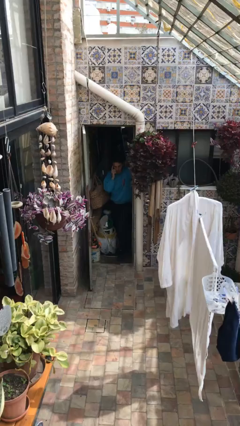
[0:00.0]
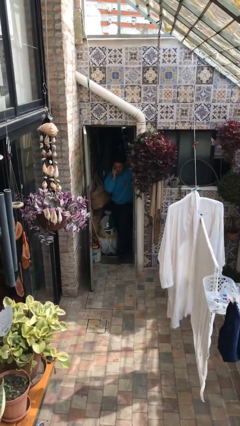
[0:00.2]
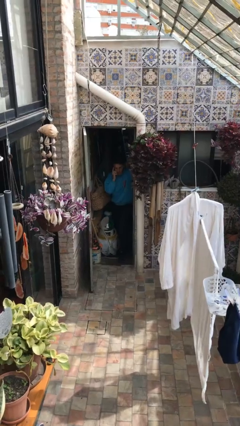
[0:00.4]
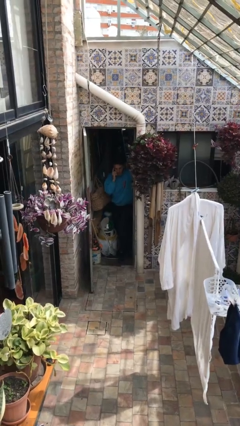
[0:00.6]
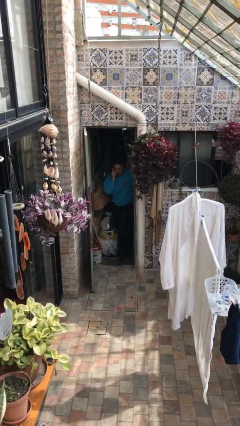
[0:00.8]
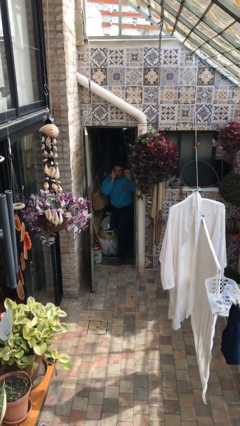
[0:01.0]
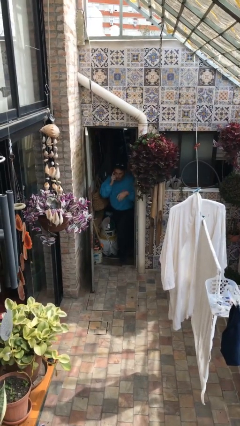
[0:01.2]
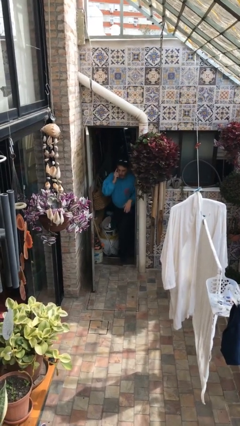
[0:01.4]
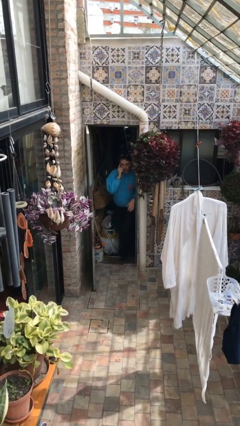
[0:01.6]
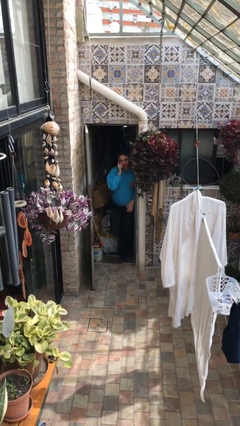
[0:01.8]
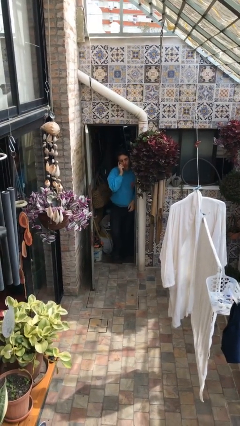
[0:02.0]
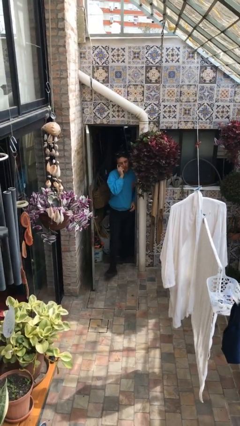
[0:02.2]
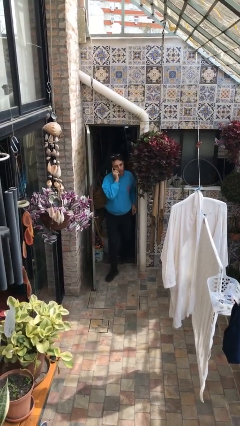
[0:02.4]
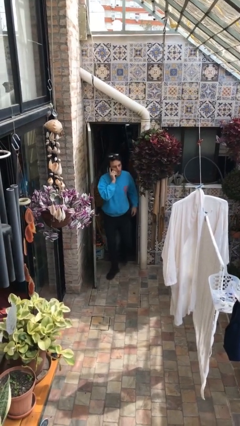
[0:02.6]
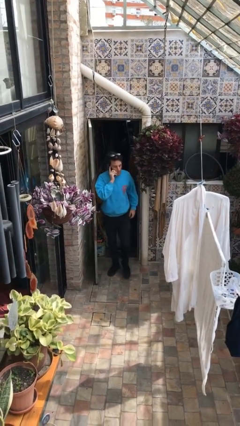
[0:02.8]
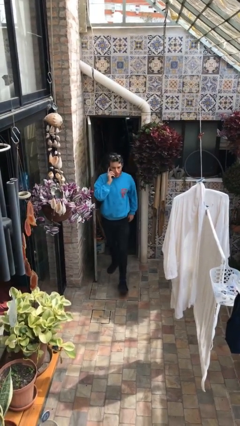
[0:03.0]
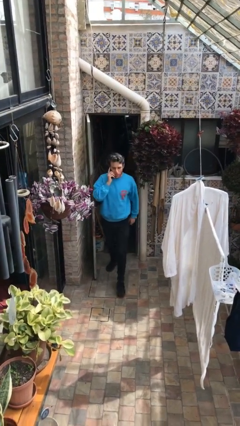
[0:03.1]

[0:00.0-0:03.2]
person enters scene through structure

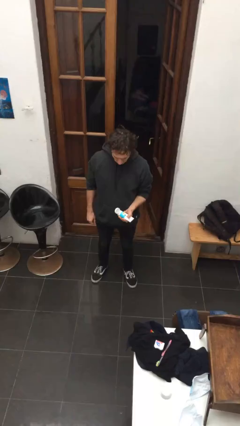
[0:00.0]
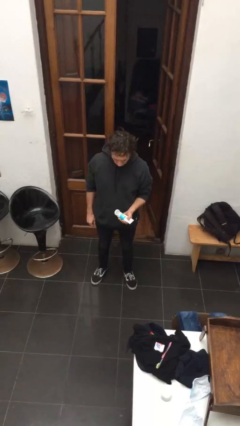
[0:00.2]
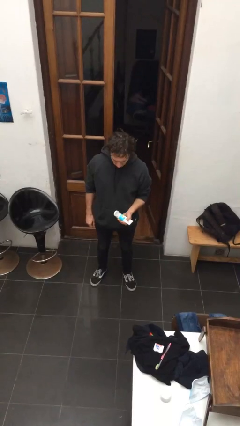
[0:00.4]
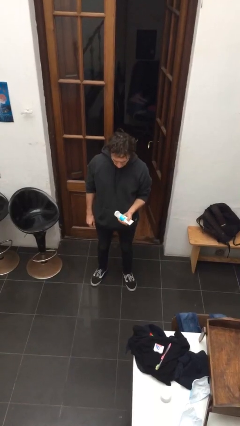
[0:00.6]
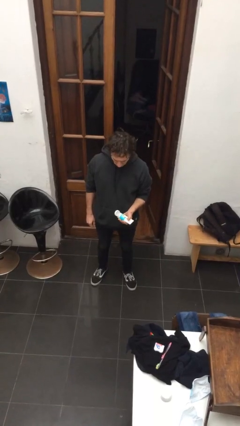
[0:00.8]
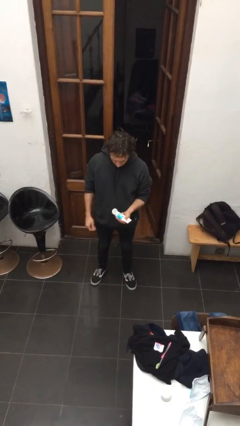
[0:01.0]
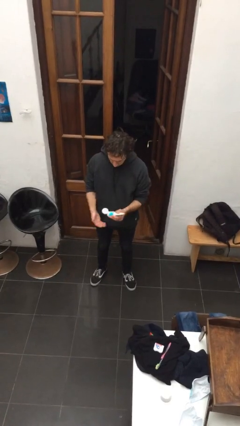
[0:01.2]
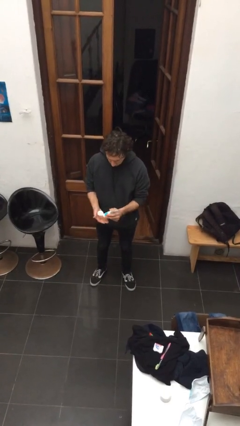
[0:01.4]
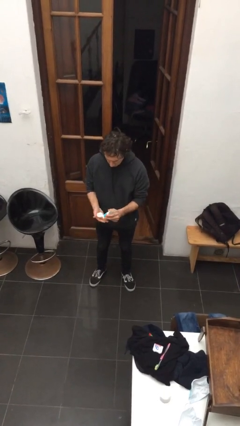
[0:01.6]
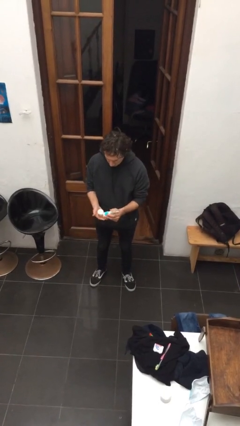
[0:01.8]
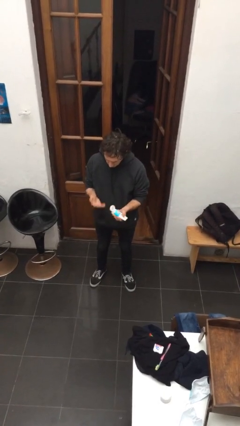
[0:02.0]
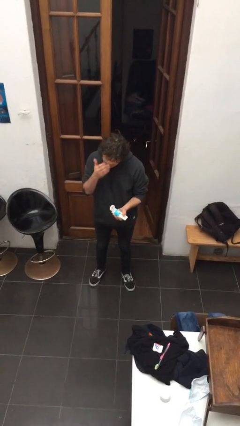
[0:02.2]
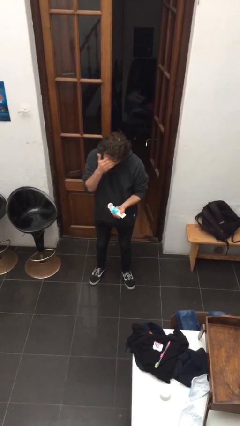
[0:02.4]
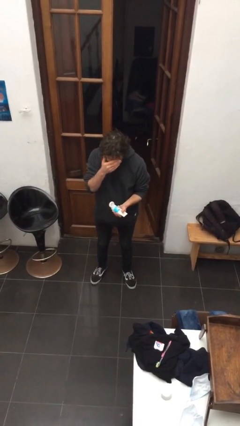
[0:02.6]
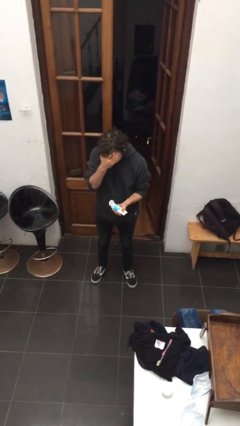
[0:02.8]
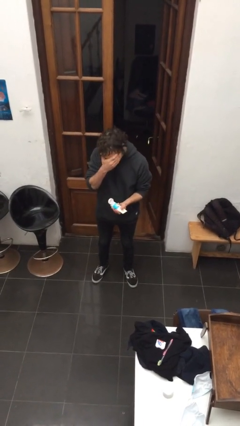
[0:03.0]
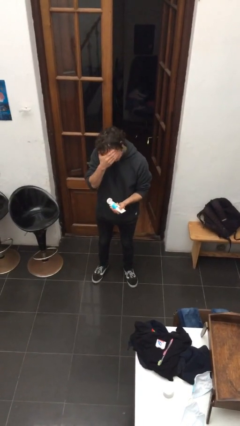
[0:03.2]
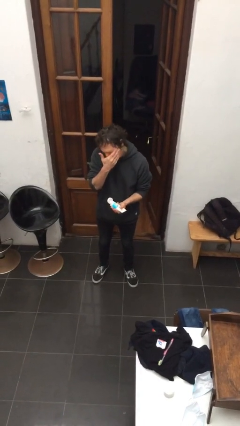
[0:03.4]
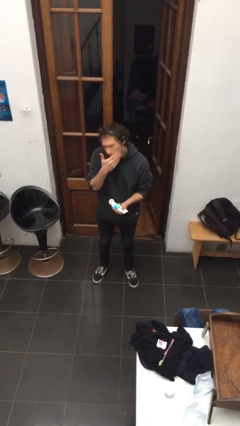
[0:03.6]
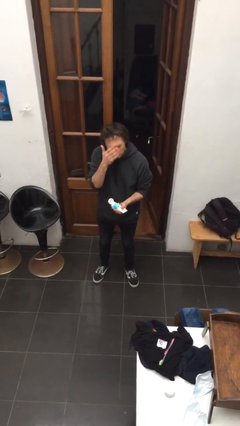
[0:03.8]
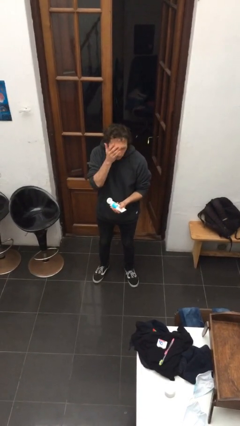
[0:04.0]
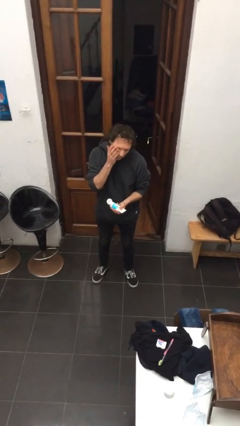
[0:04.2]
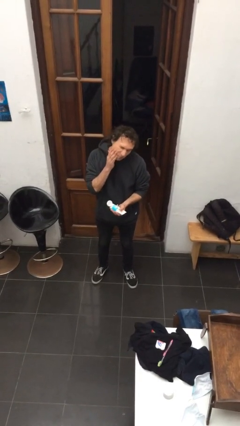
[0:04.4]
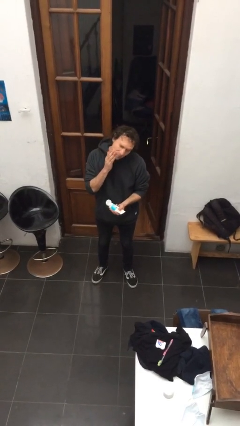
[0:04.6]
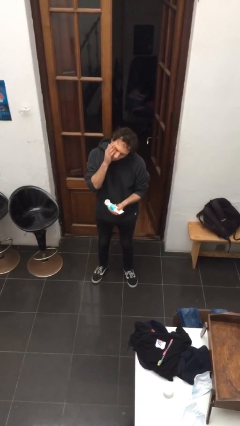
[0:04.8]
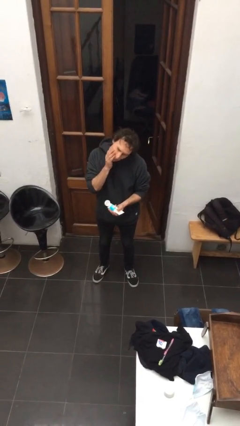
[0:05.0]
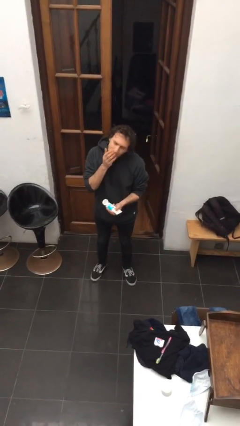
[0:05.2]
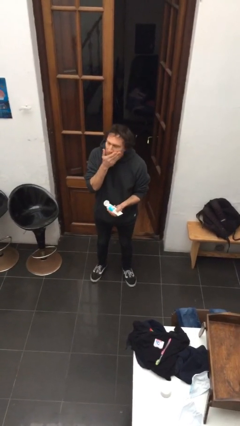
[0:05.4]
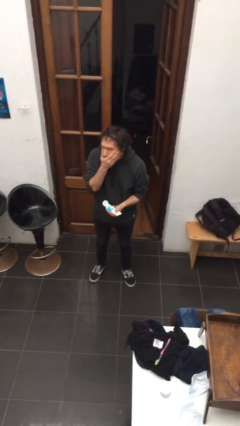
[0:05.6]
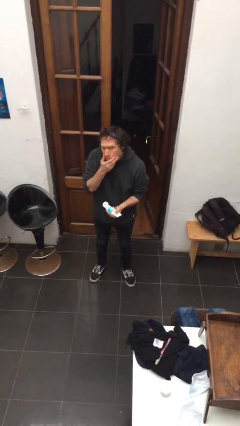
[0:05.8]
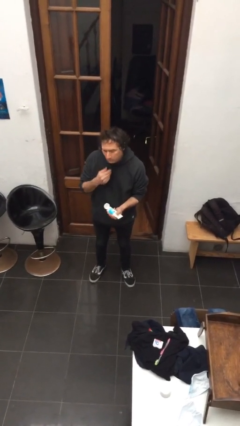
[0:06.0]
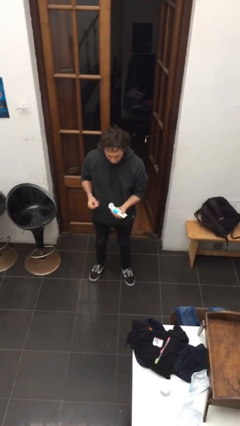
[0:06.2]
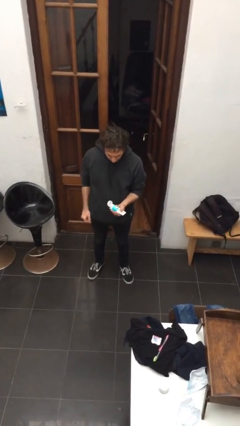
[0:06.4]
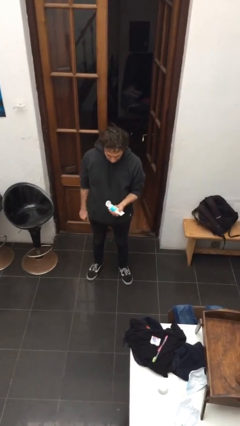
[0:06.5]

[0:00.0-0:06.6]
person applies facial moisturizer

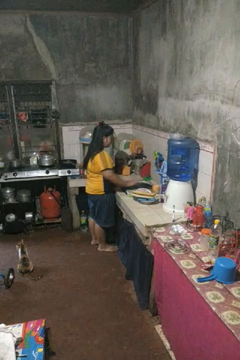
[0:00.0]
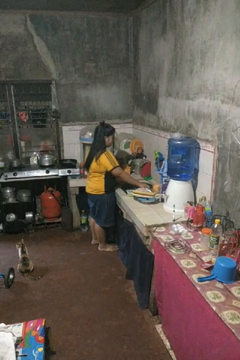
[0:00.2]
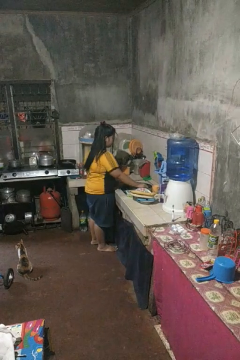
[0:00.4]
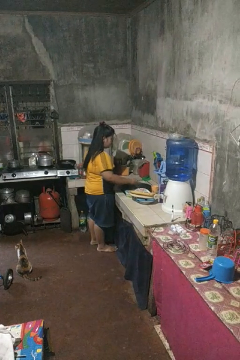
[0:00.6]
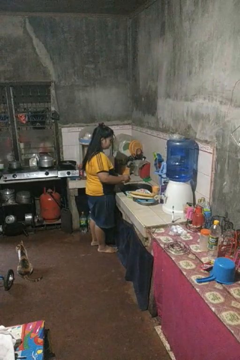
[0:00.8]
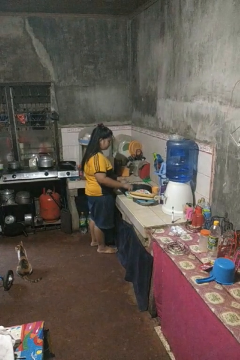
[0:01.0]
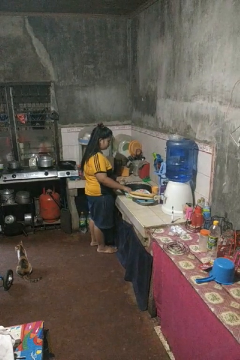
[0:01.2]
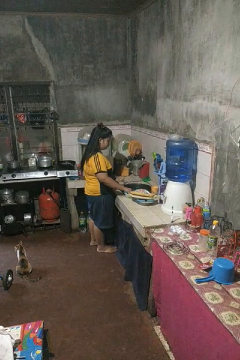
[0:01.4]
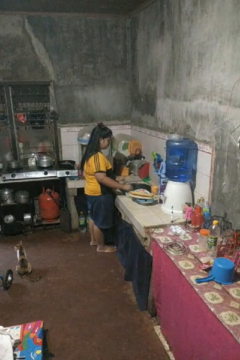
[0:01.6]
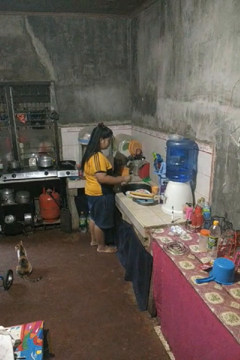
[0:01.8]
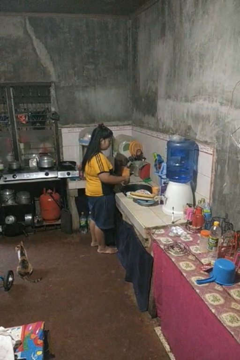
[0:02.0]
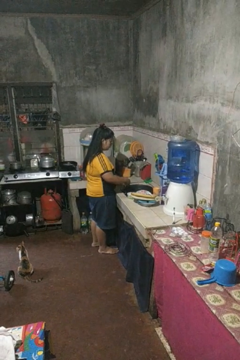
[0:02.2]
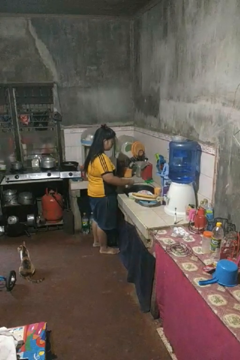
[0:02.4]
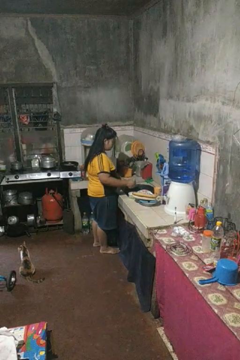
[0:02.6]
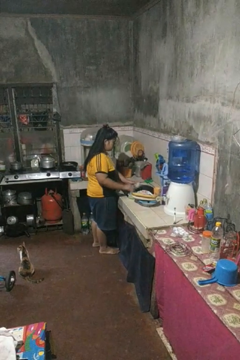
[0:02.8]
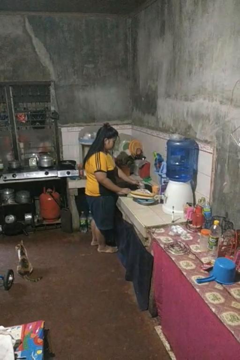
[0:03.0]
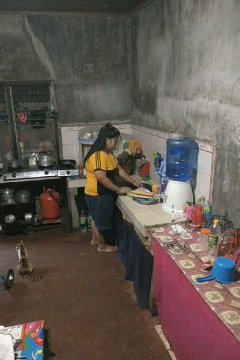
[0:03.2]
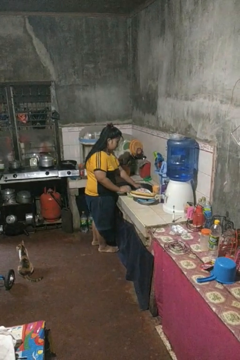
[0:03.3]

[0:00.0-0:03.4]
person washes dish

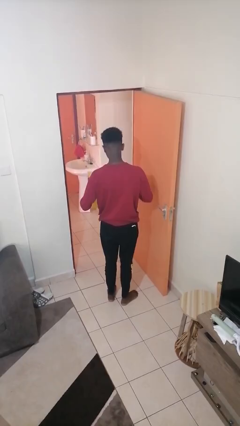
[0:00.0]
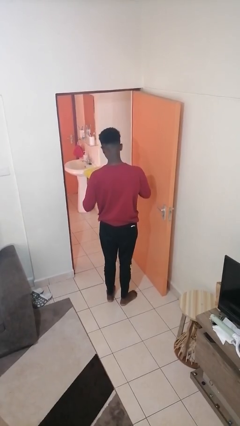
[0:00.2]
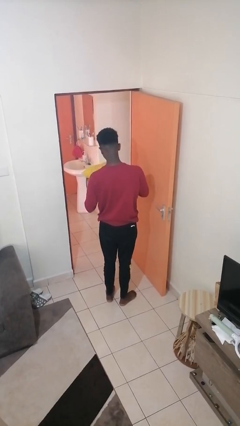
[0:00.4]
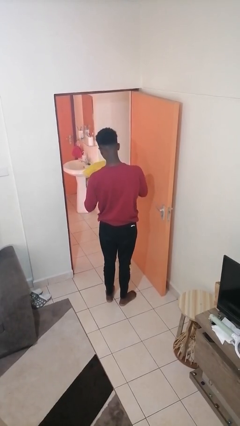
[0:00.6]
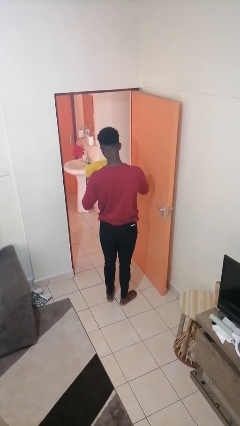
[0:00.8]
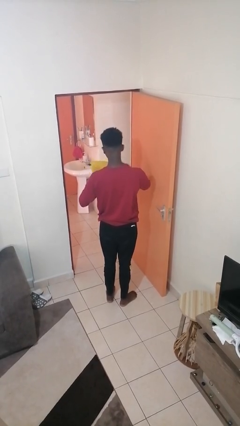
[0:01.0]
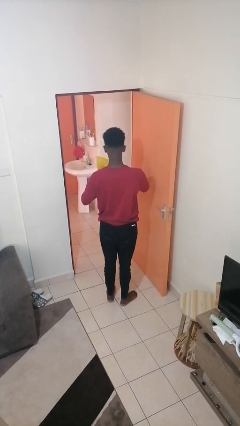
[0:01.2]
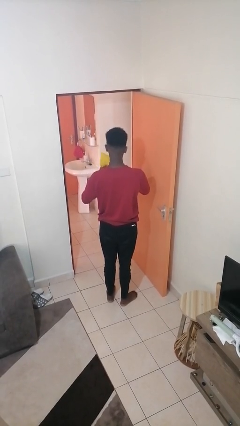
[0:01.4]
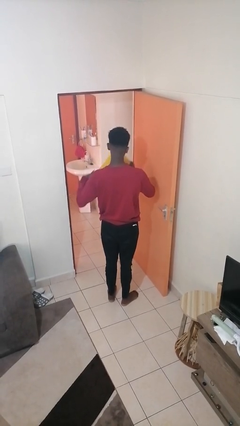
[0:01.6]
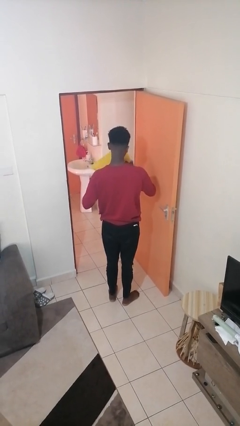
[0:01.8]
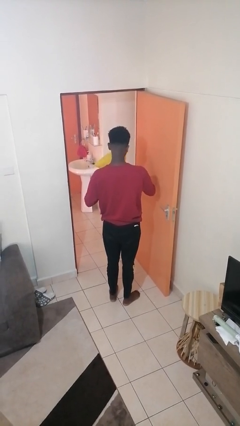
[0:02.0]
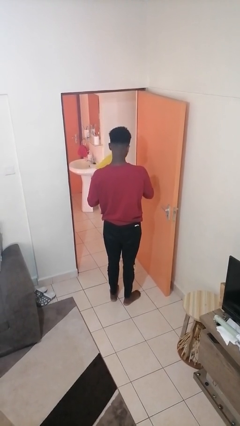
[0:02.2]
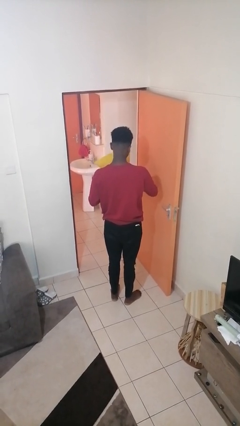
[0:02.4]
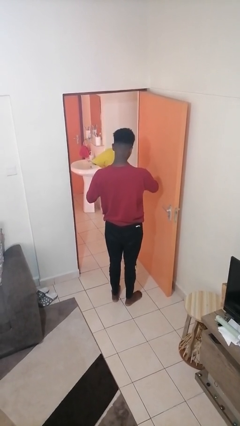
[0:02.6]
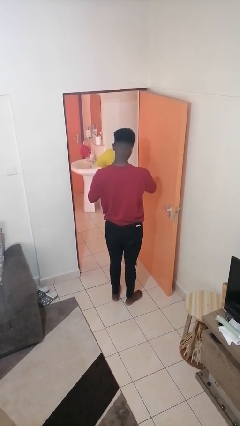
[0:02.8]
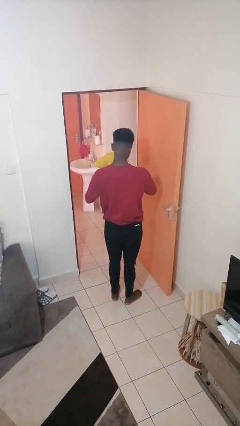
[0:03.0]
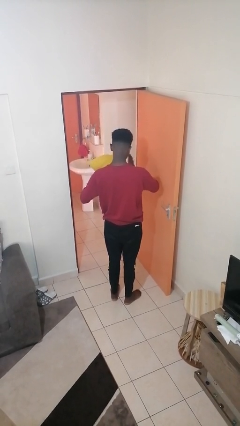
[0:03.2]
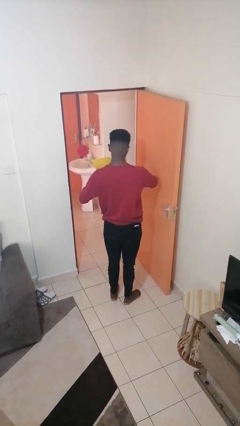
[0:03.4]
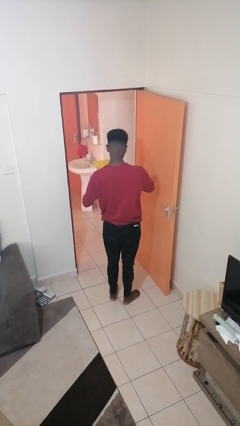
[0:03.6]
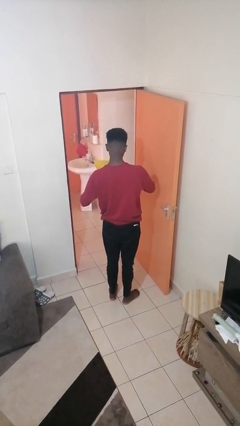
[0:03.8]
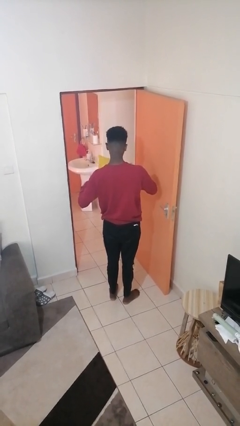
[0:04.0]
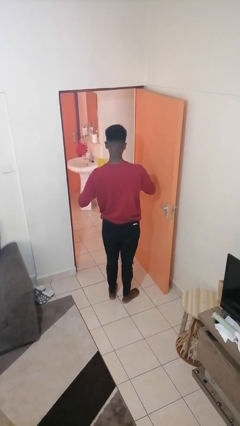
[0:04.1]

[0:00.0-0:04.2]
person squeezes object

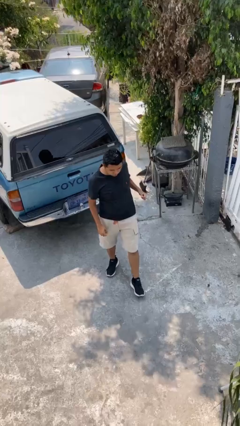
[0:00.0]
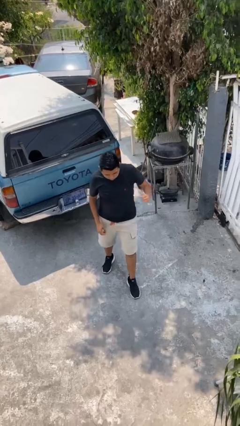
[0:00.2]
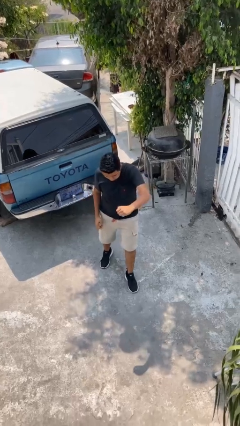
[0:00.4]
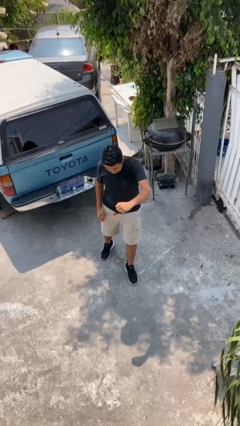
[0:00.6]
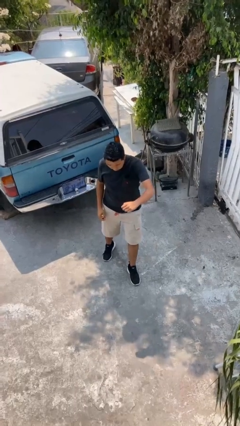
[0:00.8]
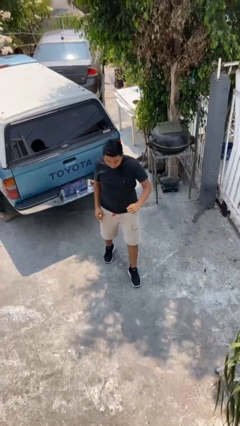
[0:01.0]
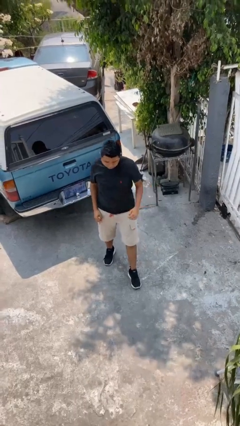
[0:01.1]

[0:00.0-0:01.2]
person punches
